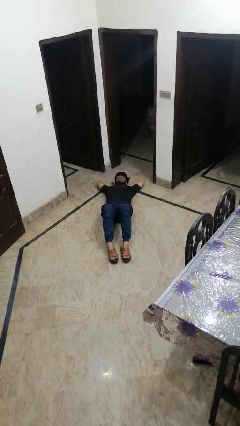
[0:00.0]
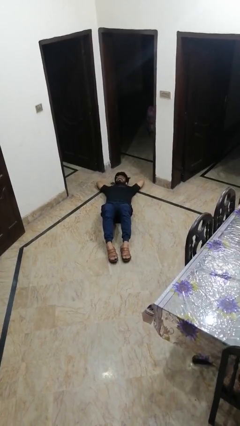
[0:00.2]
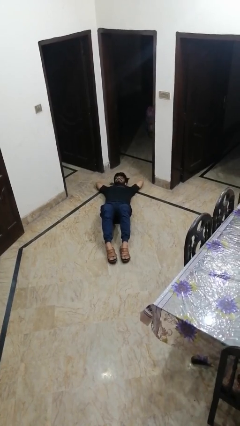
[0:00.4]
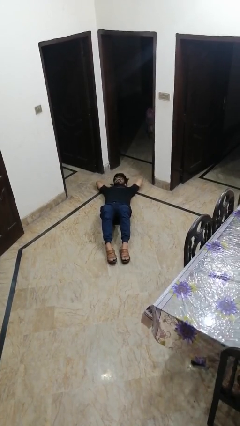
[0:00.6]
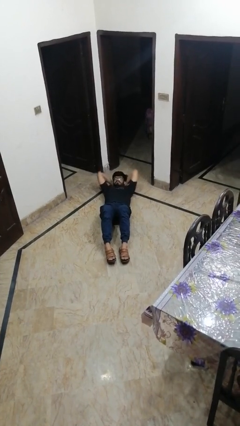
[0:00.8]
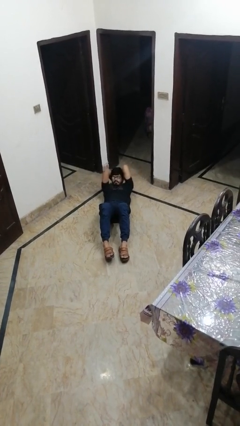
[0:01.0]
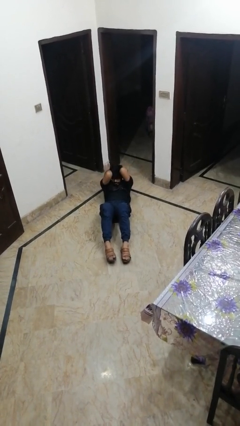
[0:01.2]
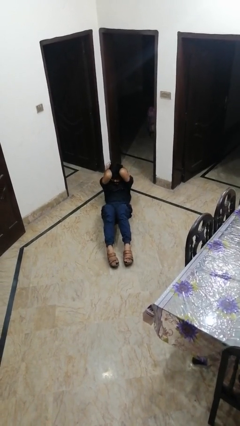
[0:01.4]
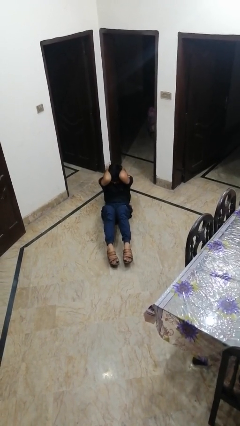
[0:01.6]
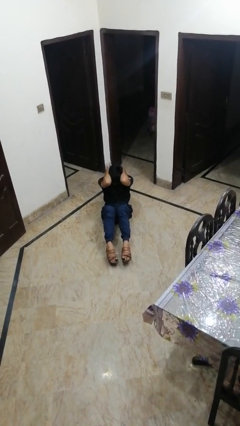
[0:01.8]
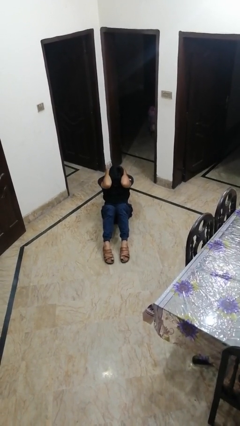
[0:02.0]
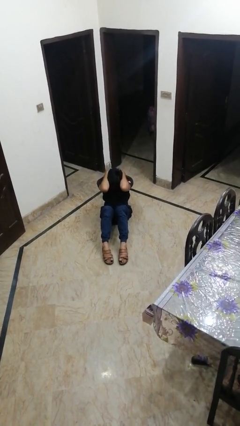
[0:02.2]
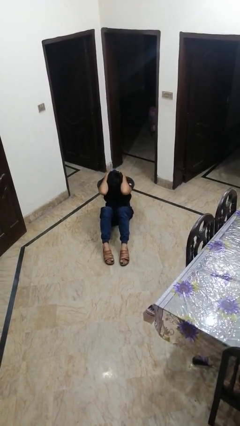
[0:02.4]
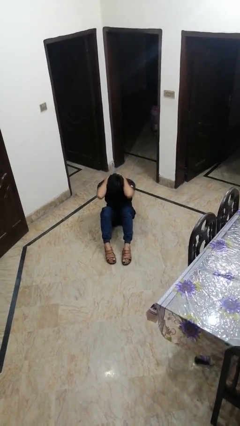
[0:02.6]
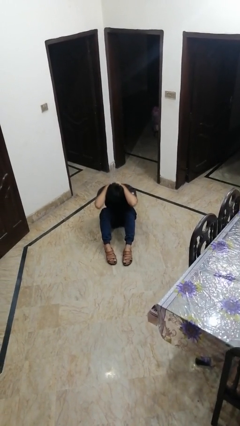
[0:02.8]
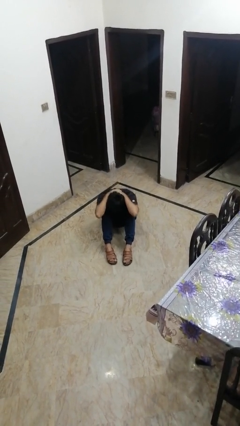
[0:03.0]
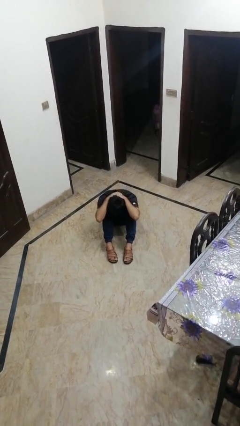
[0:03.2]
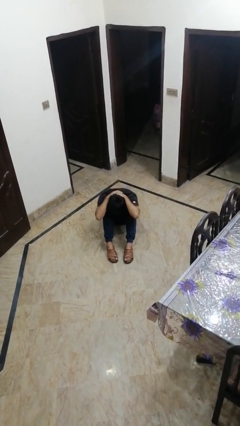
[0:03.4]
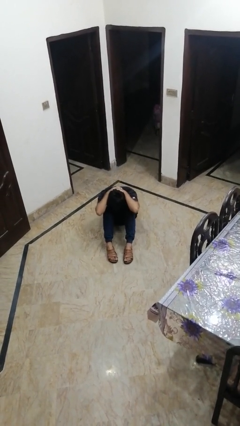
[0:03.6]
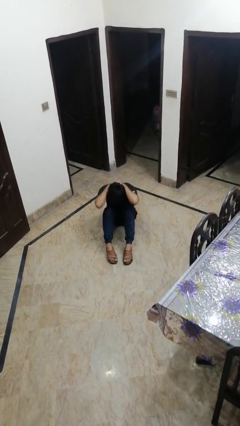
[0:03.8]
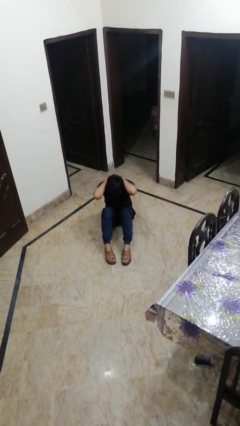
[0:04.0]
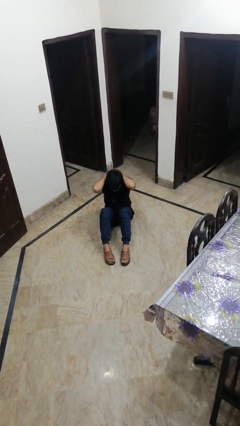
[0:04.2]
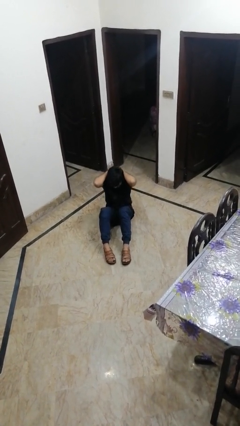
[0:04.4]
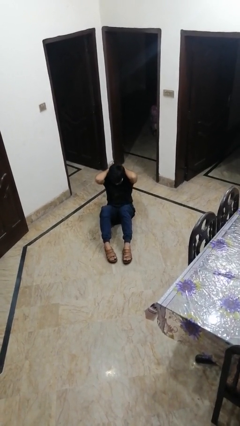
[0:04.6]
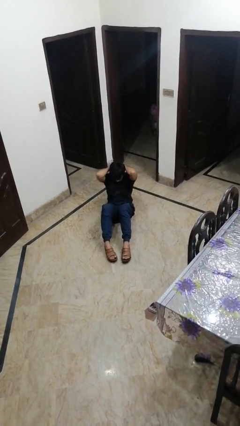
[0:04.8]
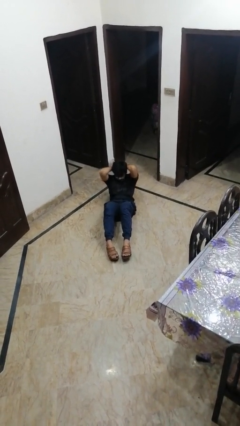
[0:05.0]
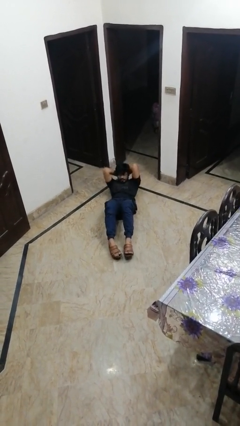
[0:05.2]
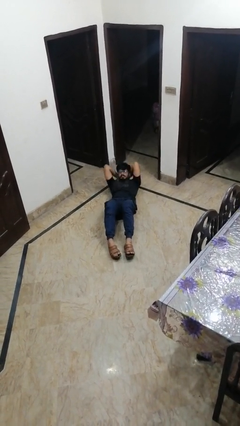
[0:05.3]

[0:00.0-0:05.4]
person exercises with situp

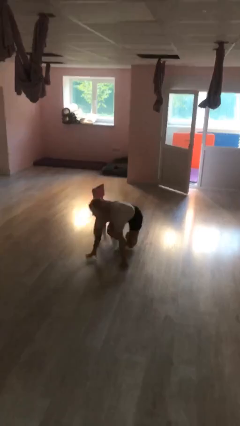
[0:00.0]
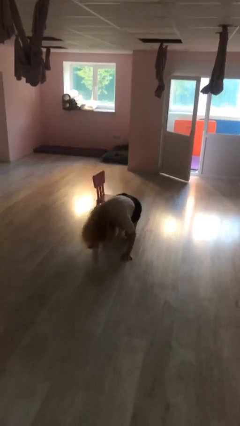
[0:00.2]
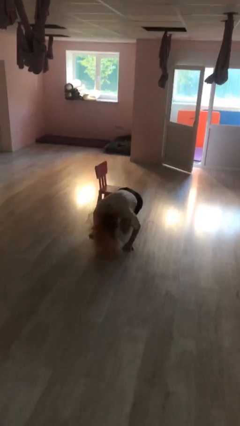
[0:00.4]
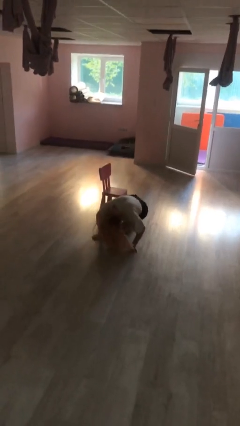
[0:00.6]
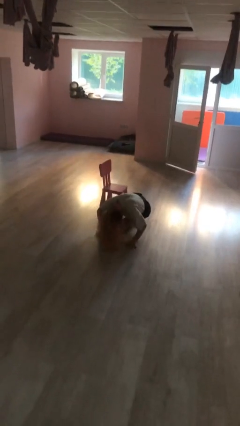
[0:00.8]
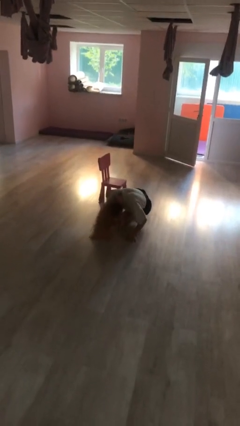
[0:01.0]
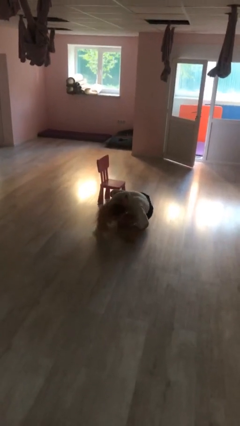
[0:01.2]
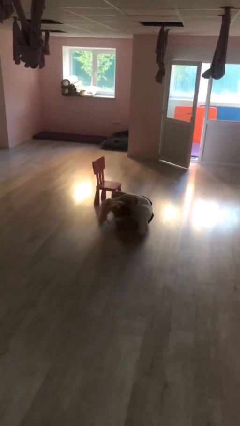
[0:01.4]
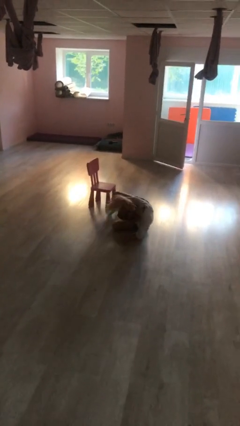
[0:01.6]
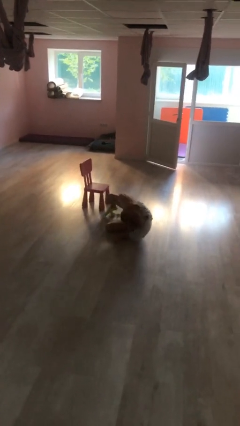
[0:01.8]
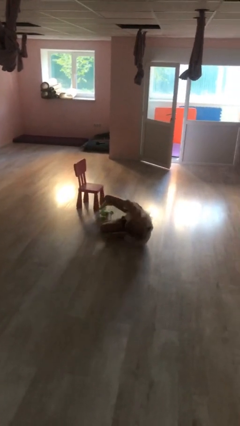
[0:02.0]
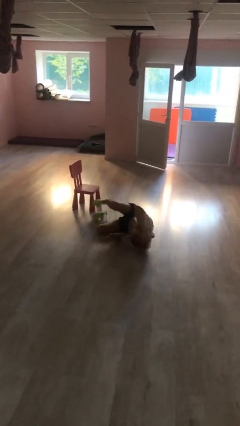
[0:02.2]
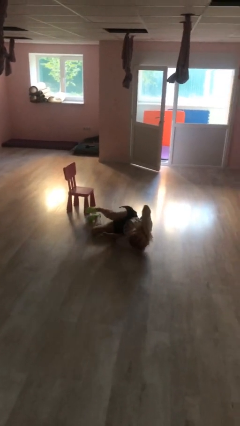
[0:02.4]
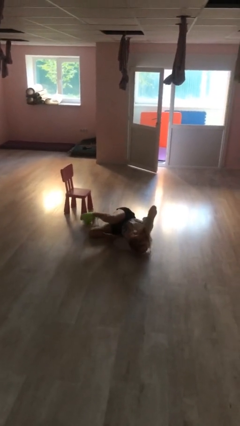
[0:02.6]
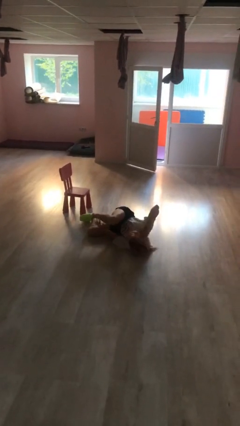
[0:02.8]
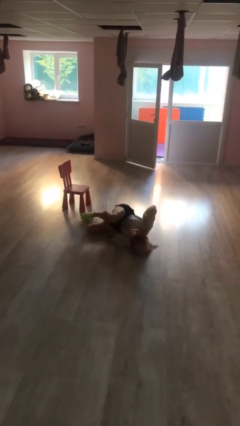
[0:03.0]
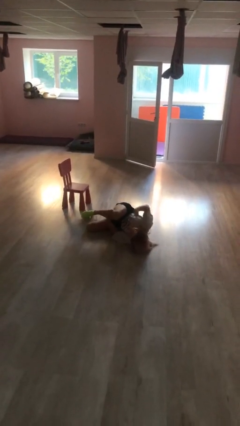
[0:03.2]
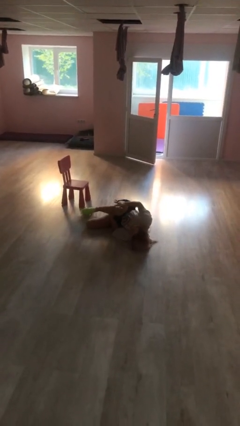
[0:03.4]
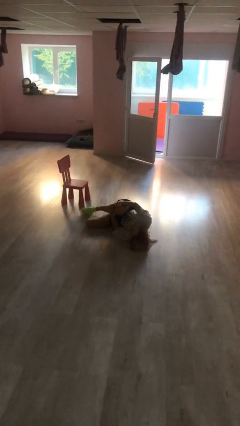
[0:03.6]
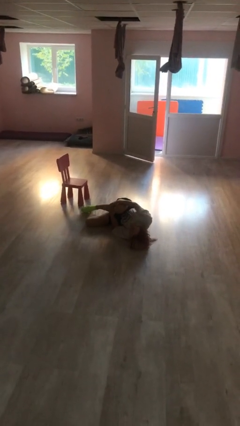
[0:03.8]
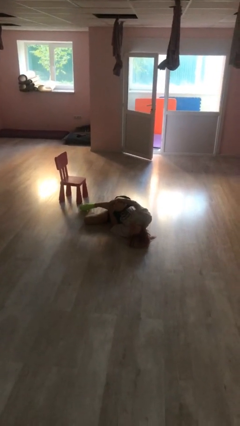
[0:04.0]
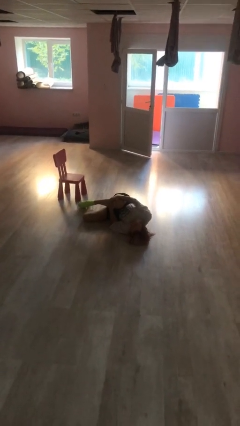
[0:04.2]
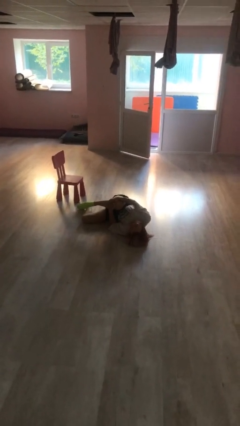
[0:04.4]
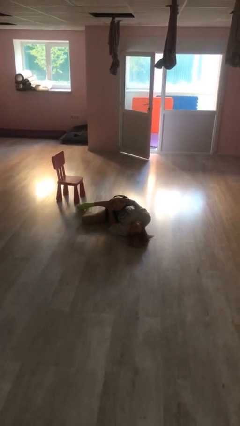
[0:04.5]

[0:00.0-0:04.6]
person lies down on floor

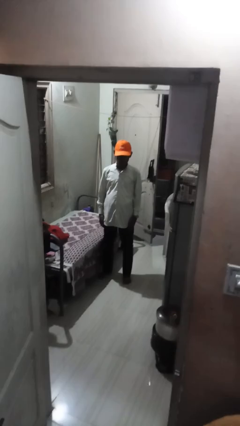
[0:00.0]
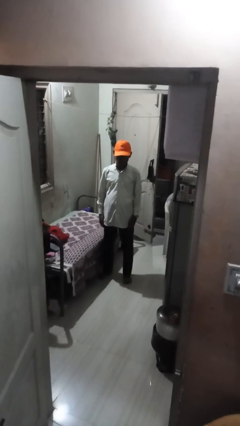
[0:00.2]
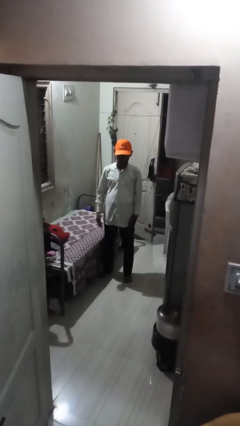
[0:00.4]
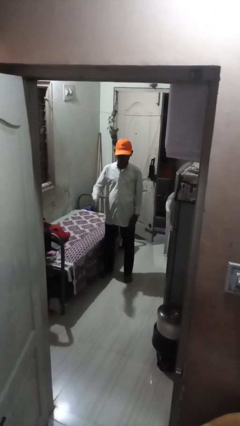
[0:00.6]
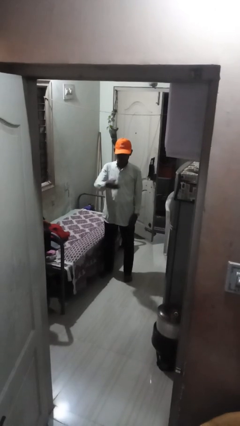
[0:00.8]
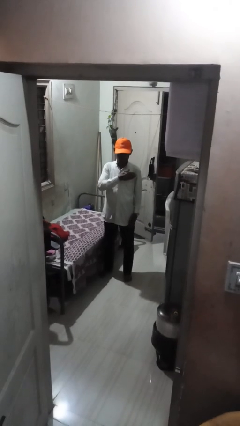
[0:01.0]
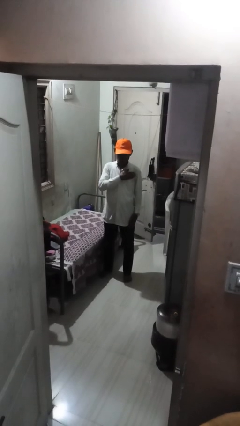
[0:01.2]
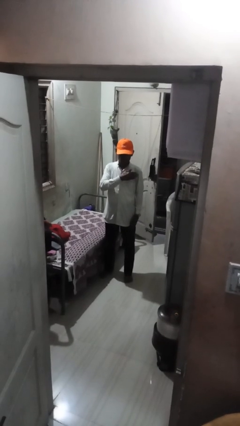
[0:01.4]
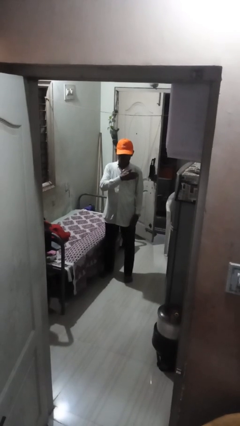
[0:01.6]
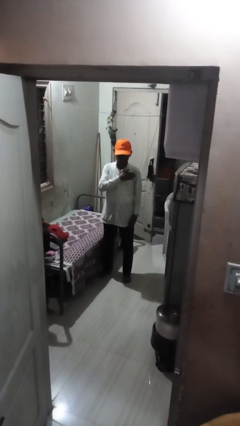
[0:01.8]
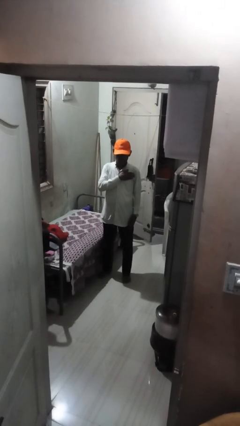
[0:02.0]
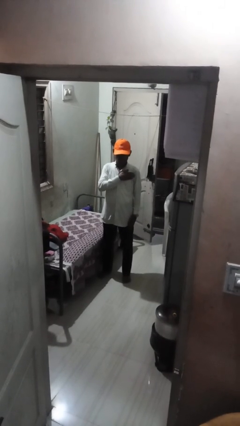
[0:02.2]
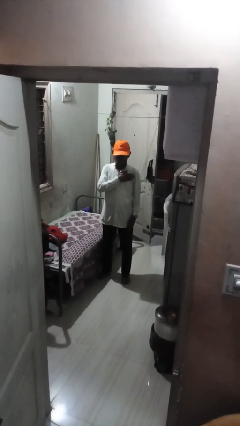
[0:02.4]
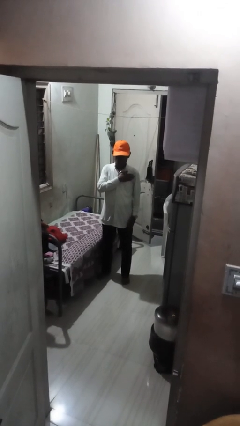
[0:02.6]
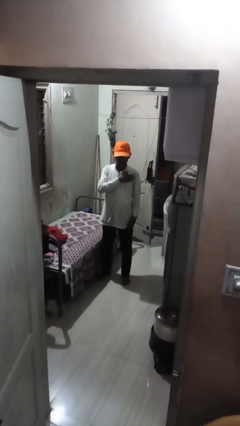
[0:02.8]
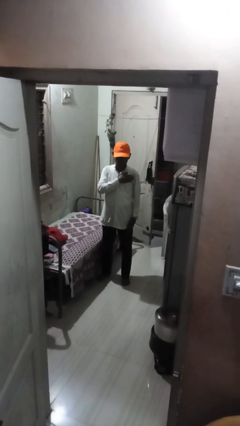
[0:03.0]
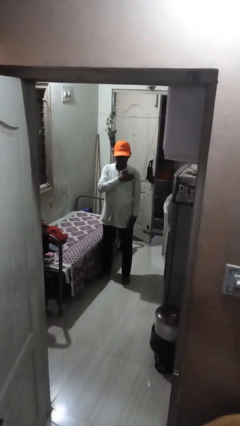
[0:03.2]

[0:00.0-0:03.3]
person drums on chest

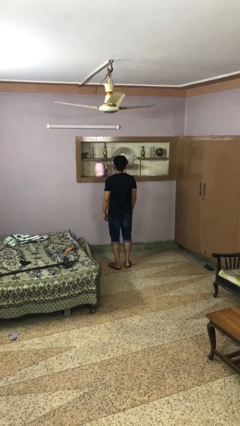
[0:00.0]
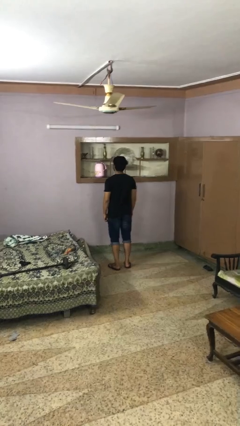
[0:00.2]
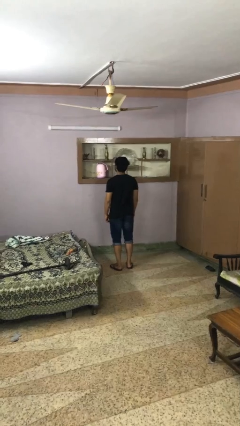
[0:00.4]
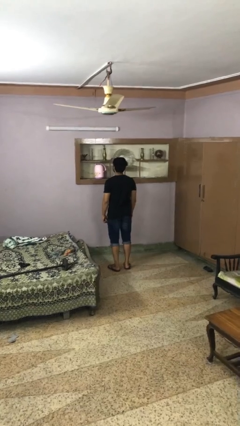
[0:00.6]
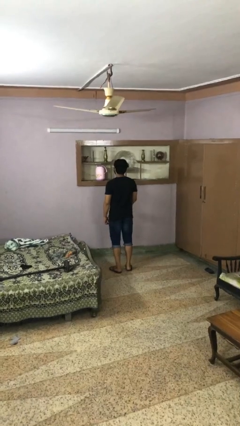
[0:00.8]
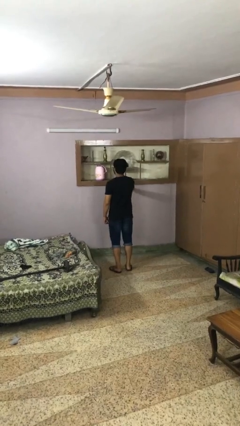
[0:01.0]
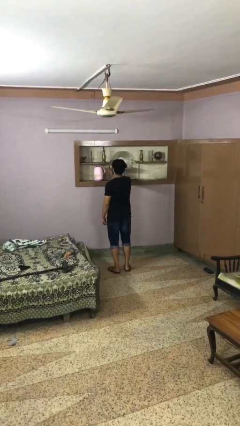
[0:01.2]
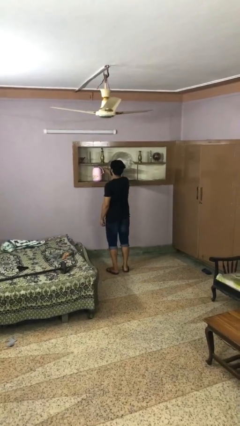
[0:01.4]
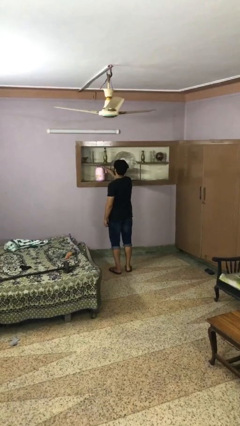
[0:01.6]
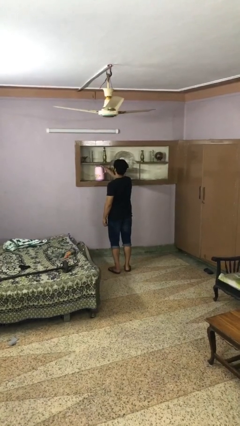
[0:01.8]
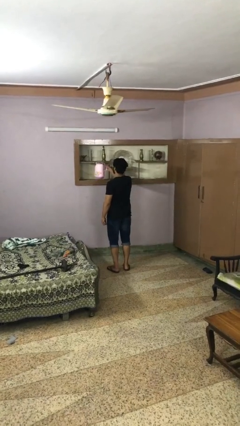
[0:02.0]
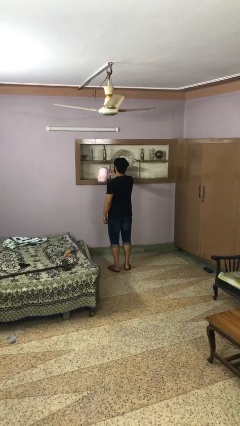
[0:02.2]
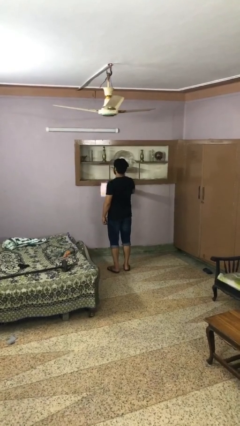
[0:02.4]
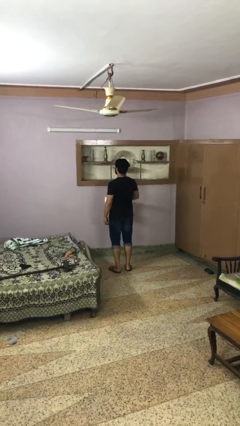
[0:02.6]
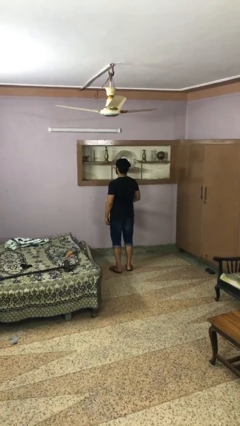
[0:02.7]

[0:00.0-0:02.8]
person picks up object from countertop

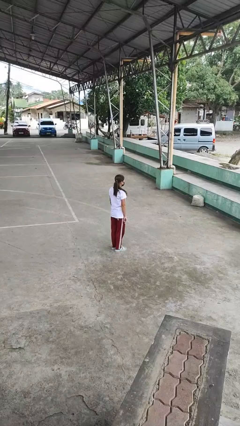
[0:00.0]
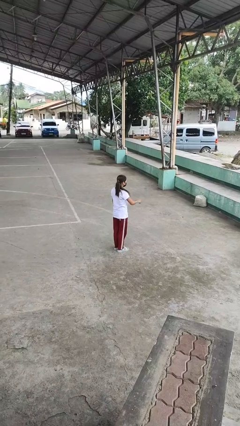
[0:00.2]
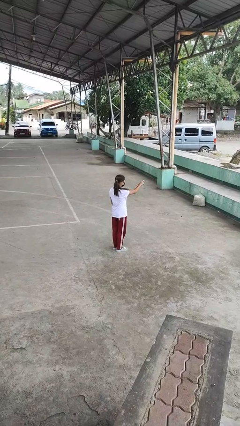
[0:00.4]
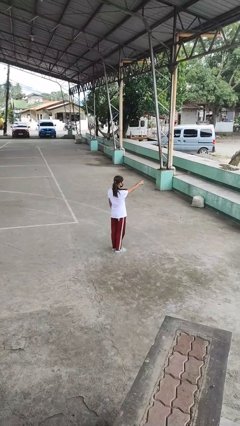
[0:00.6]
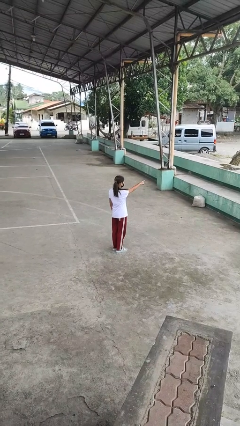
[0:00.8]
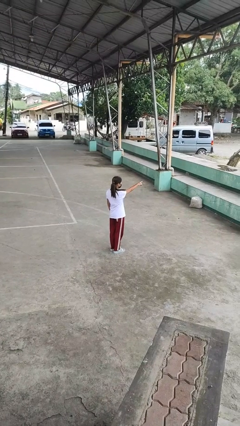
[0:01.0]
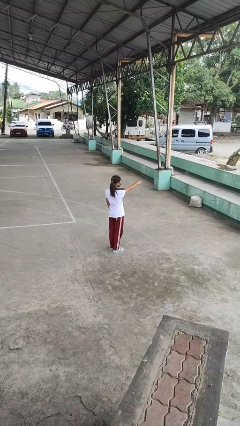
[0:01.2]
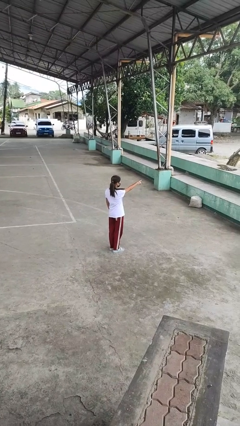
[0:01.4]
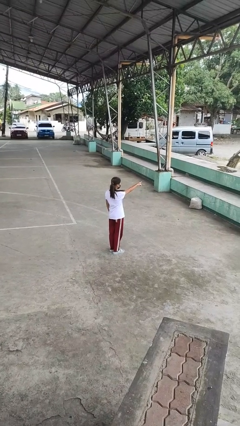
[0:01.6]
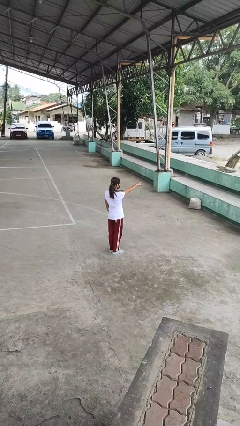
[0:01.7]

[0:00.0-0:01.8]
person points at person
